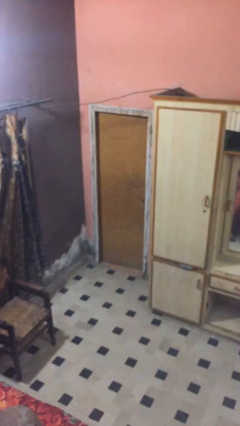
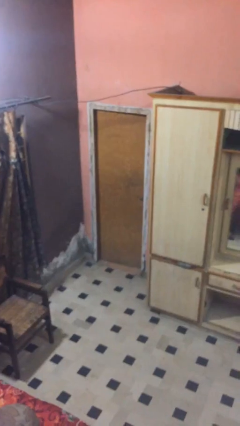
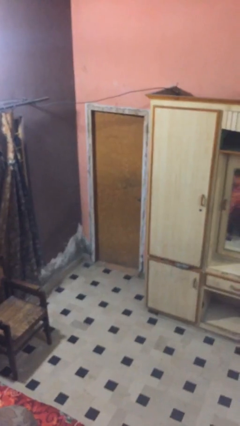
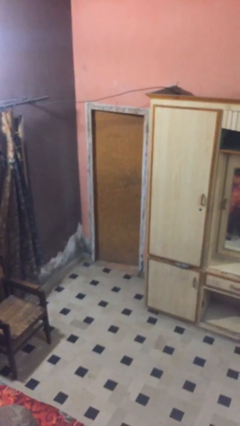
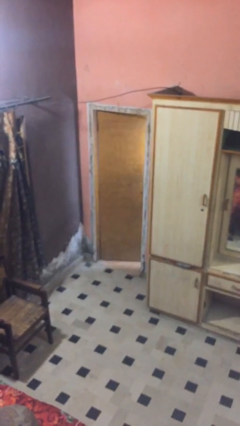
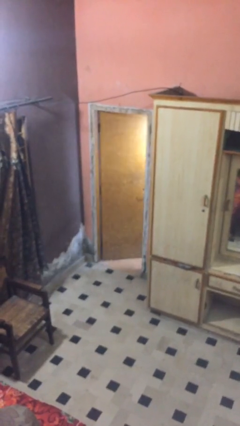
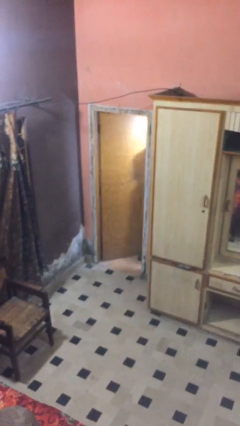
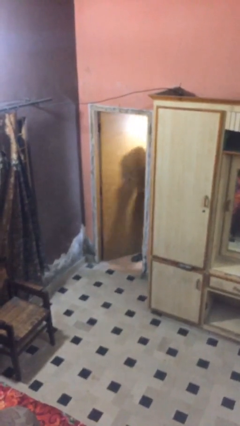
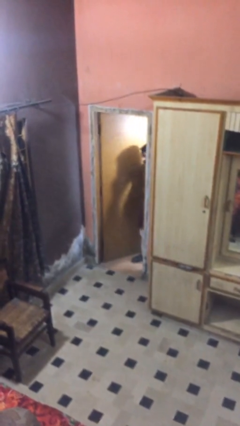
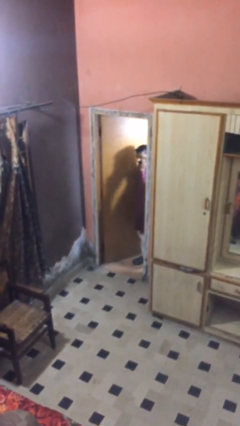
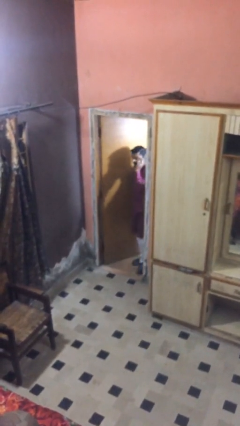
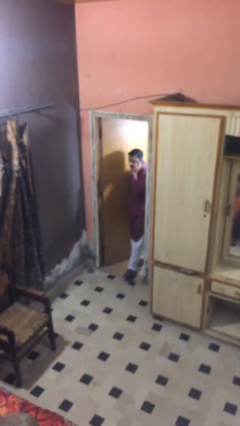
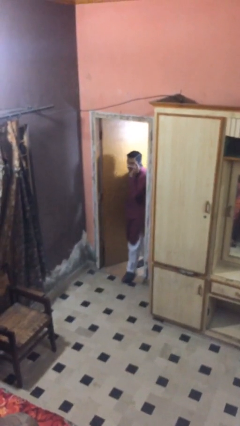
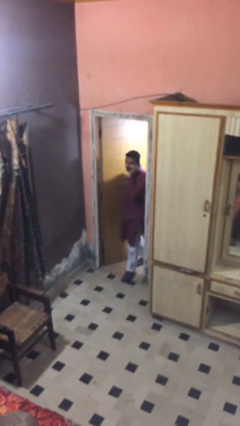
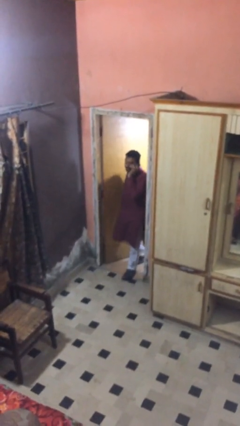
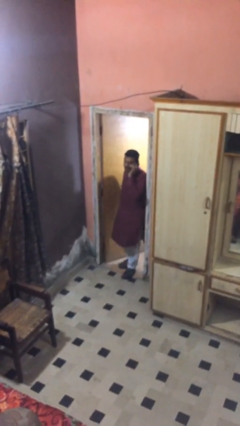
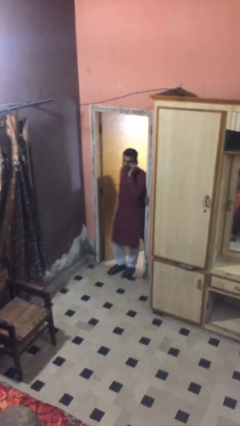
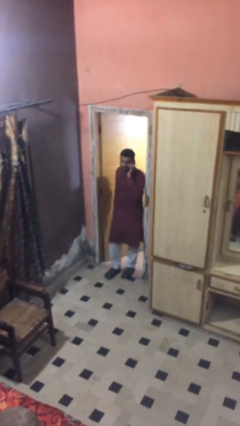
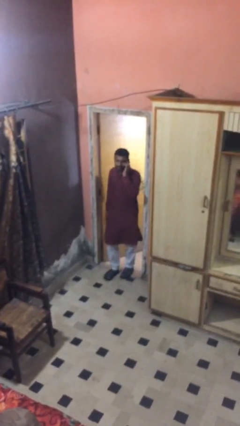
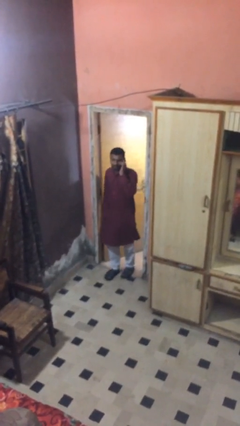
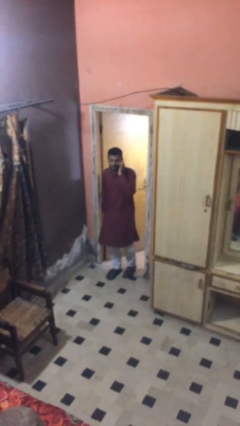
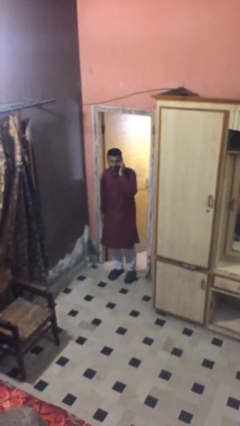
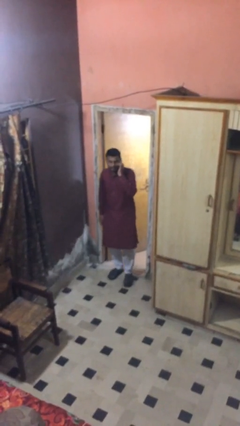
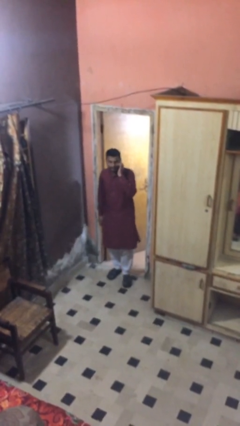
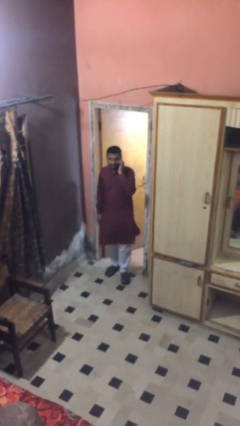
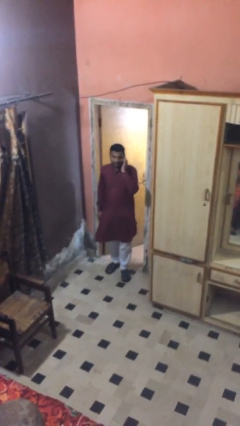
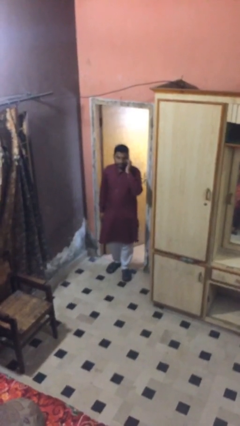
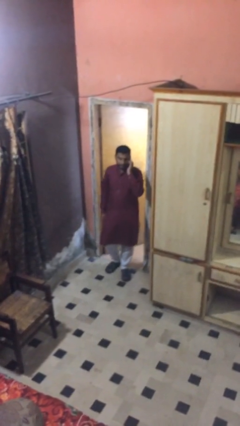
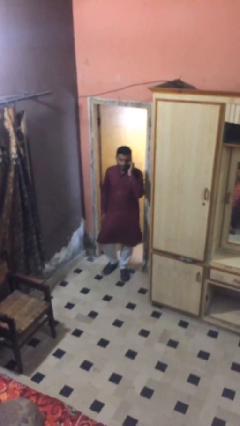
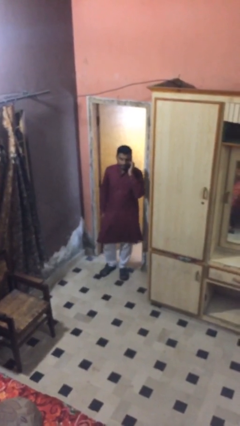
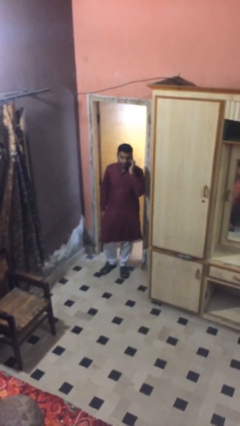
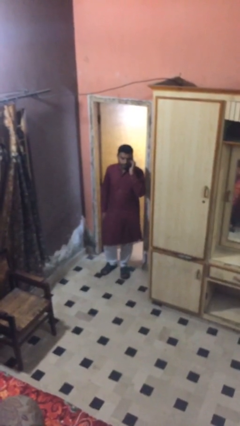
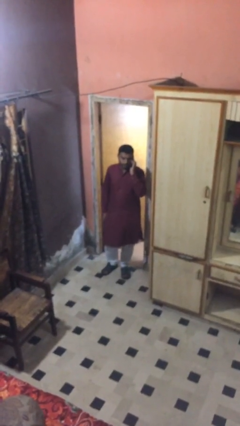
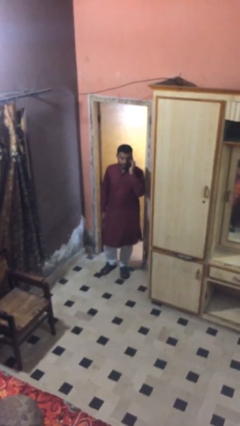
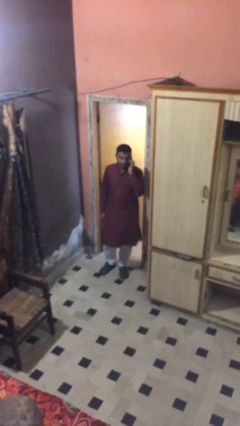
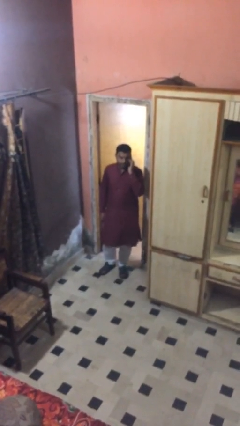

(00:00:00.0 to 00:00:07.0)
person enters scene through structure

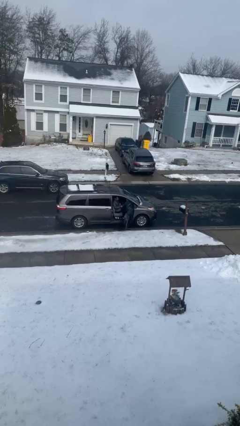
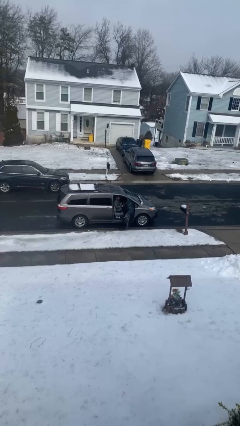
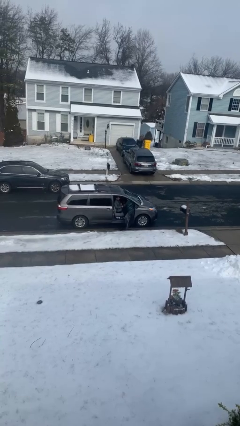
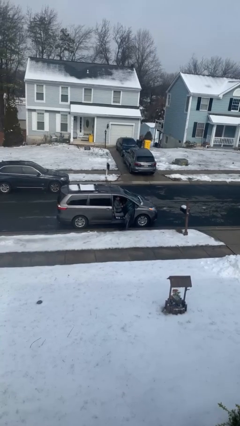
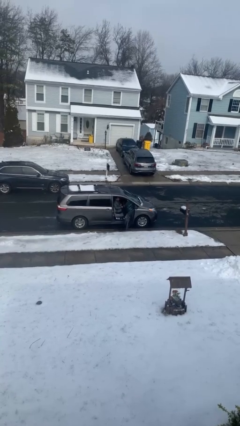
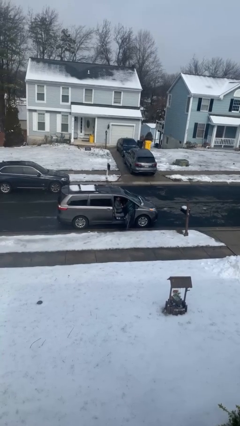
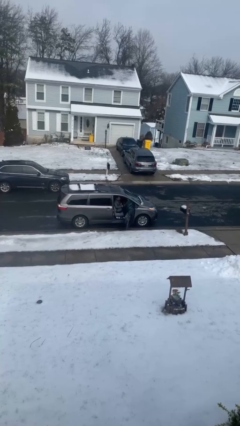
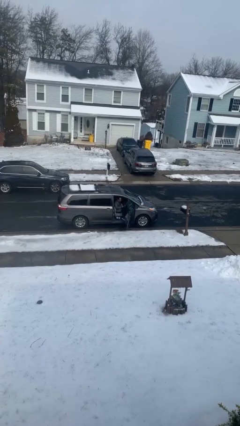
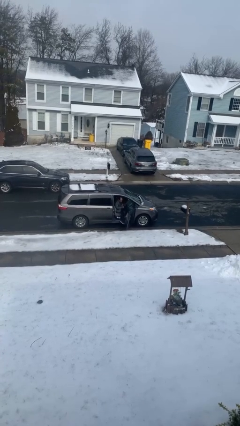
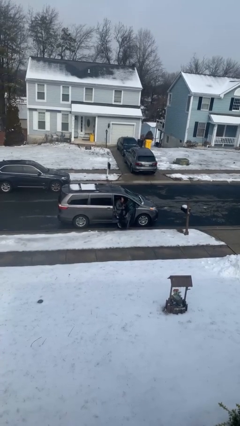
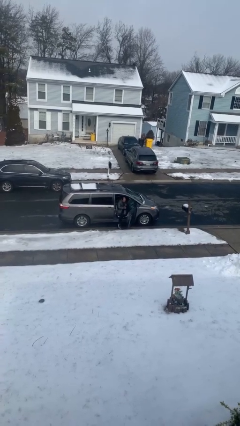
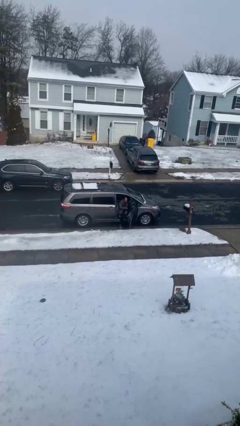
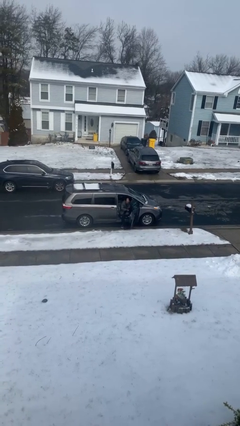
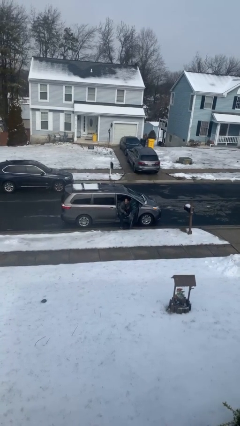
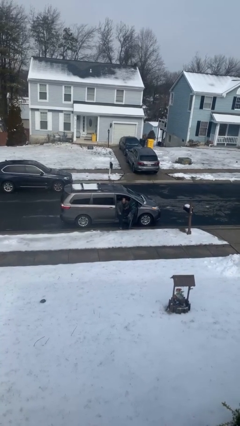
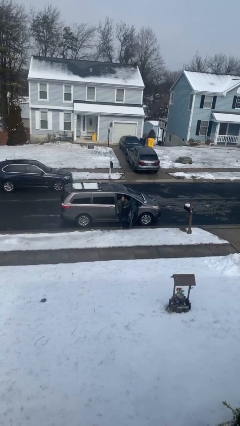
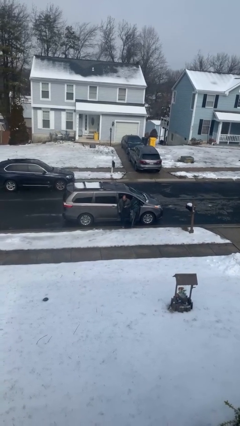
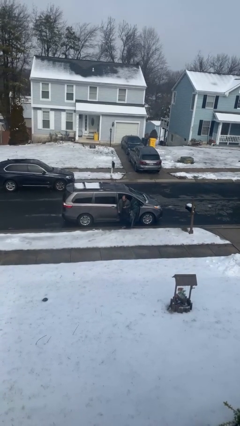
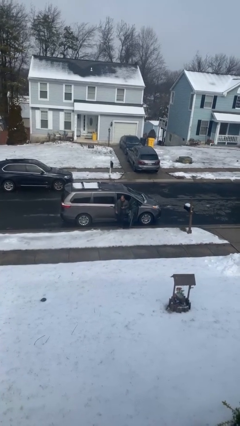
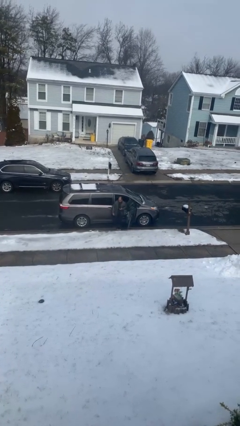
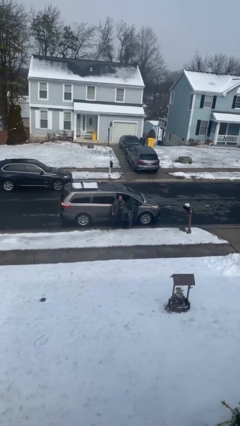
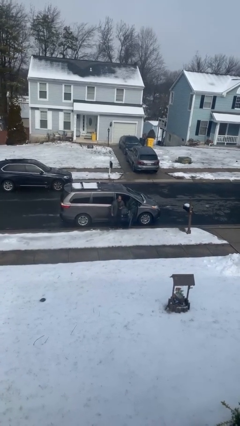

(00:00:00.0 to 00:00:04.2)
person exits car

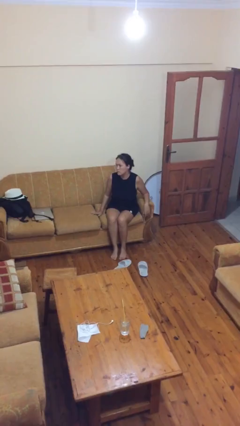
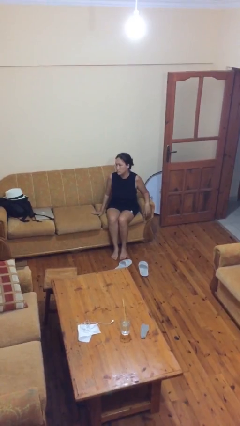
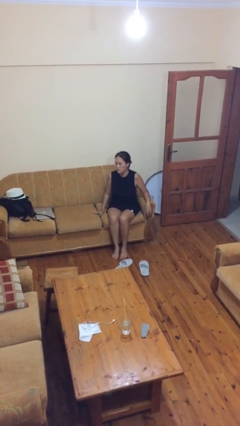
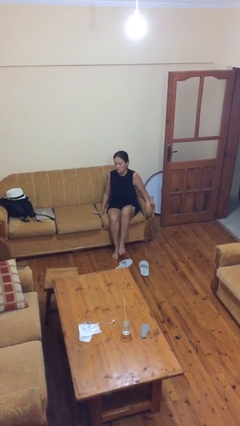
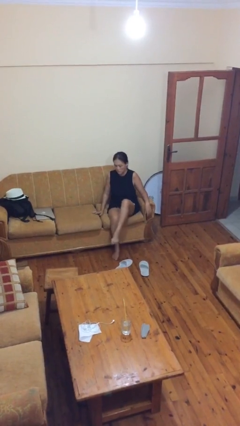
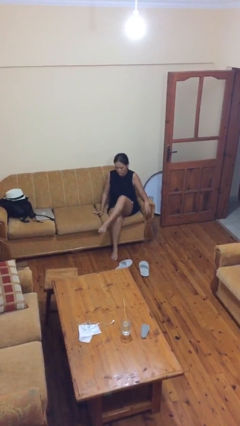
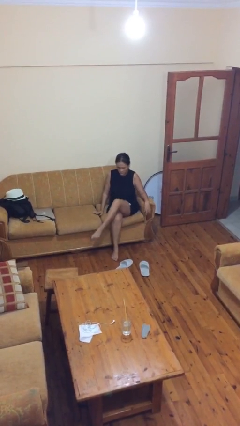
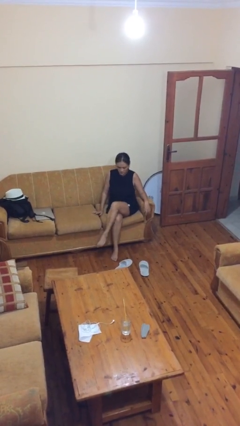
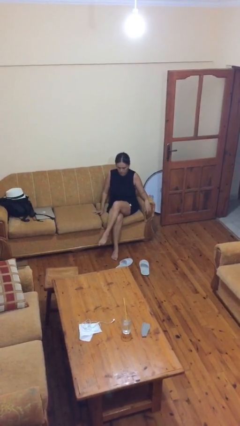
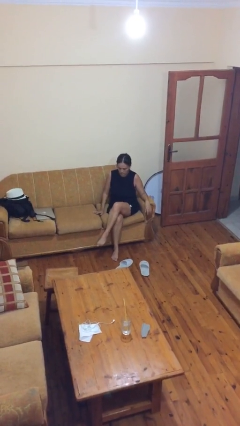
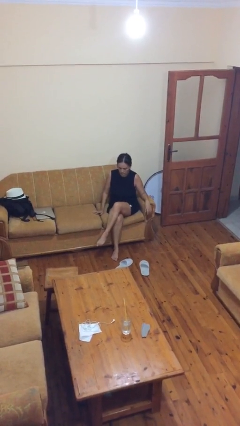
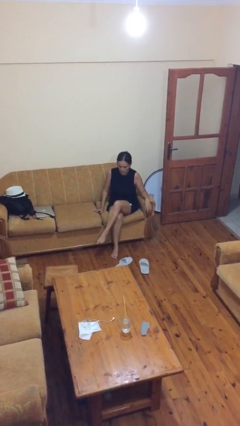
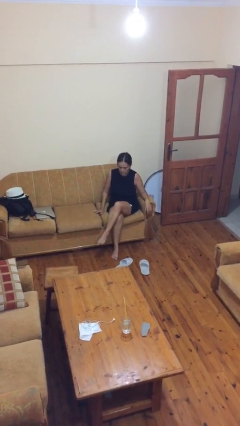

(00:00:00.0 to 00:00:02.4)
person crosses legs

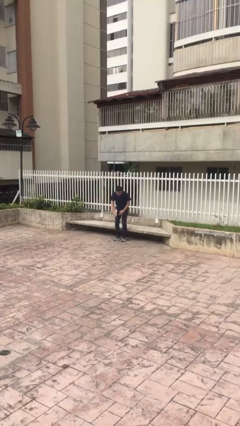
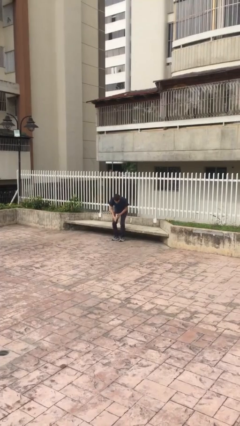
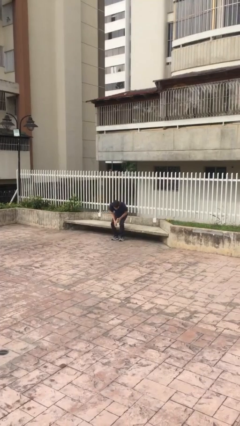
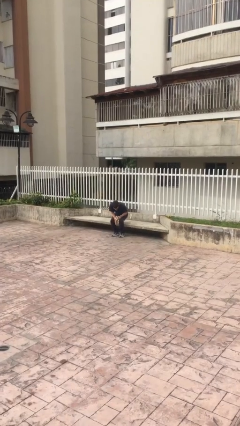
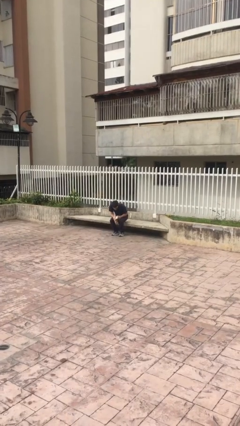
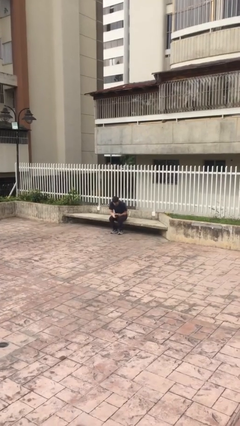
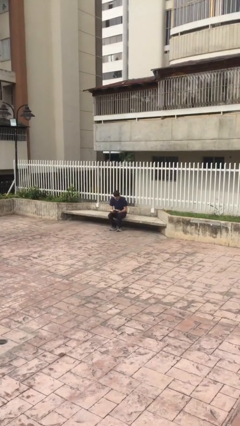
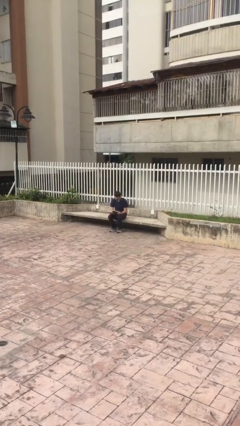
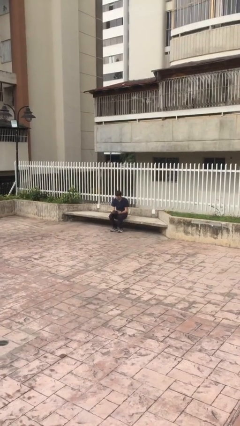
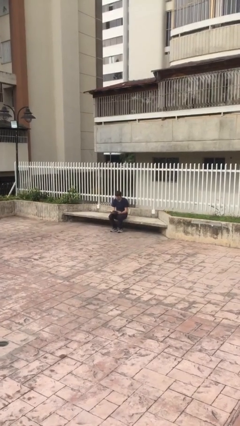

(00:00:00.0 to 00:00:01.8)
person sits down

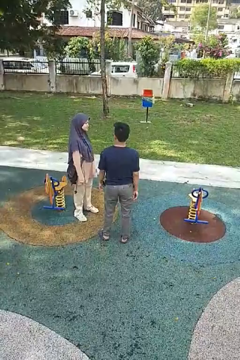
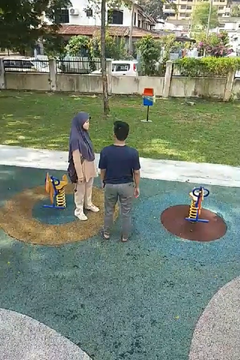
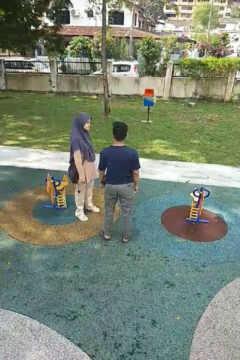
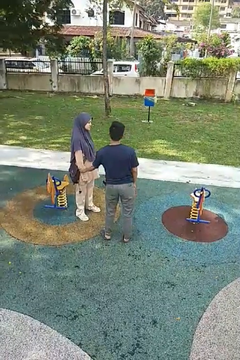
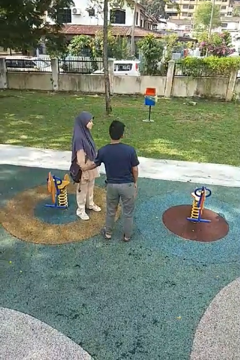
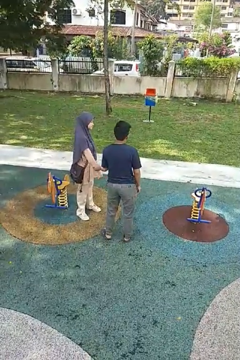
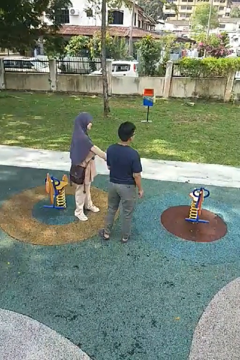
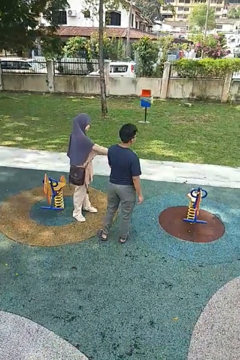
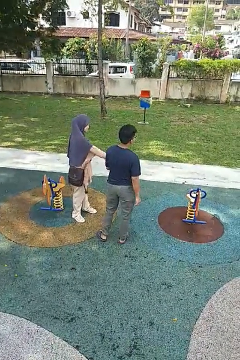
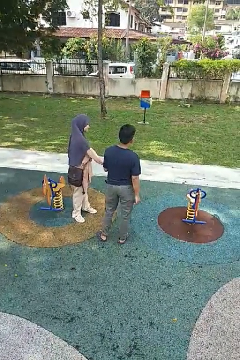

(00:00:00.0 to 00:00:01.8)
person grabs person by forearm

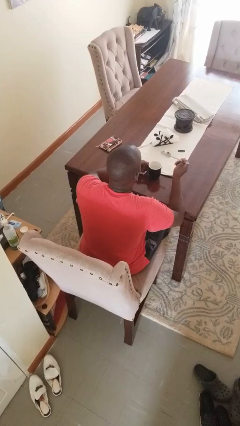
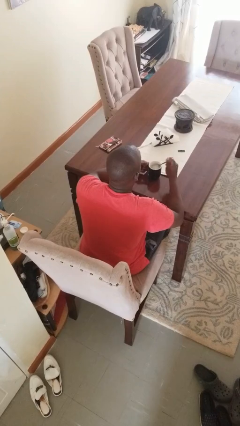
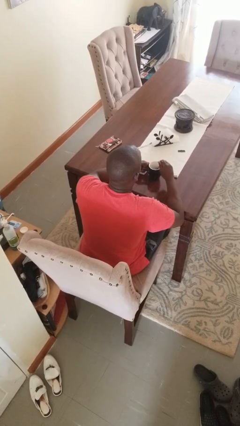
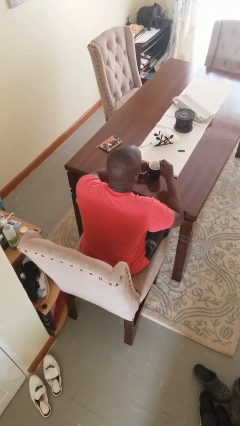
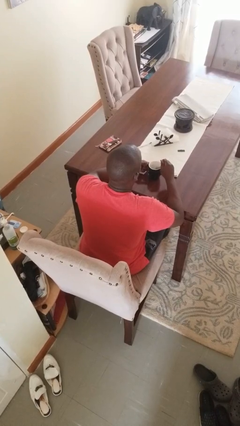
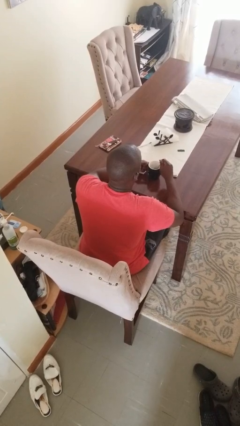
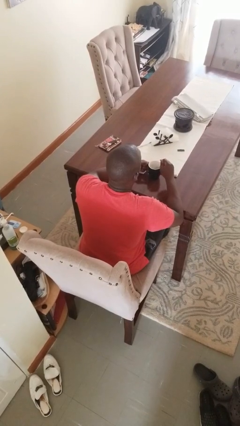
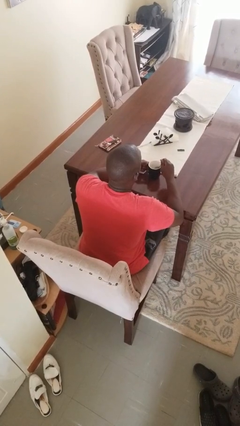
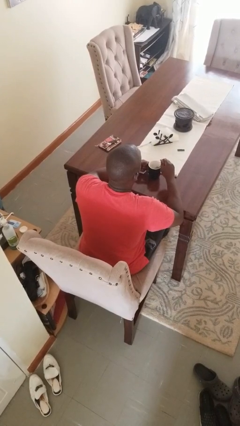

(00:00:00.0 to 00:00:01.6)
person stirs mug
